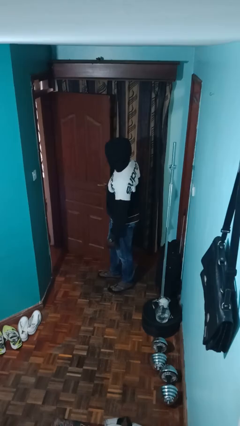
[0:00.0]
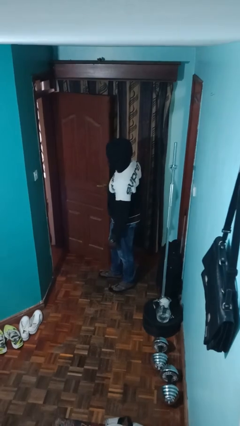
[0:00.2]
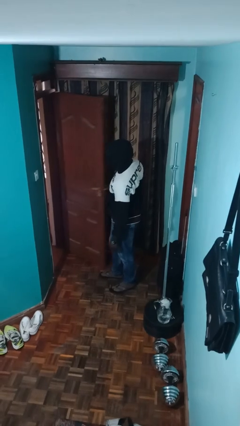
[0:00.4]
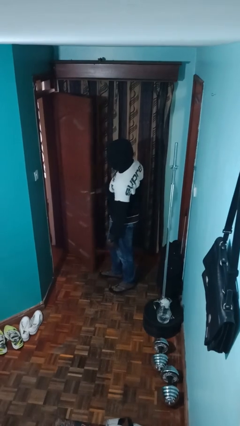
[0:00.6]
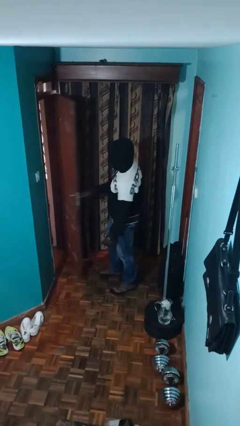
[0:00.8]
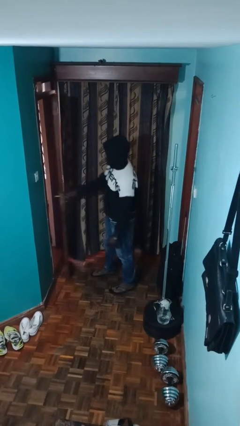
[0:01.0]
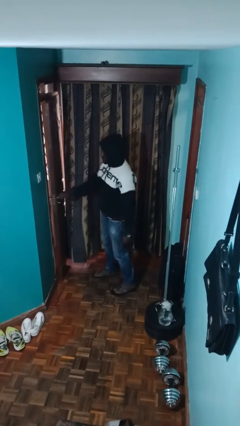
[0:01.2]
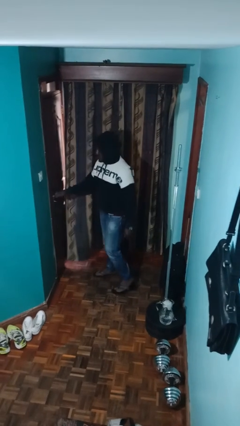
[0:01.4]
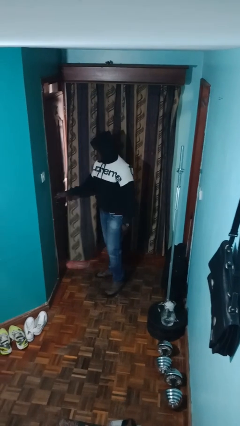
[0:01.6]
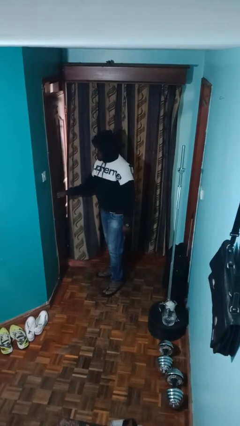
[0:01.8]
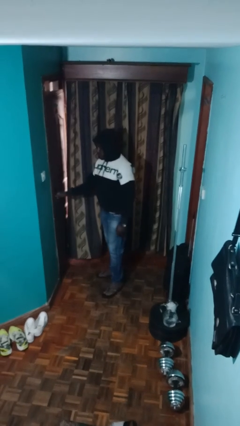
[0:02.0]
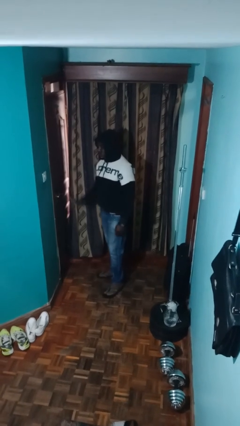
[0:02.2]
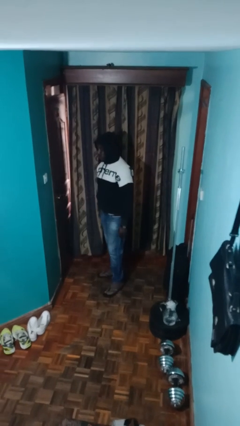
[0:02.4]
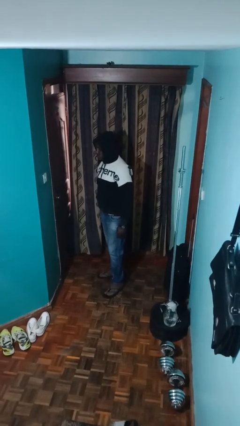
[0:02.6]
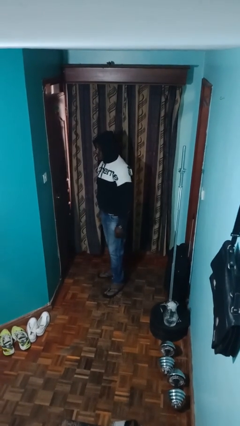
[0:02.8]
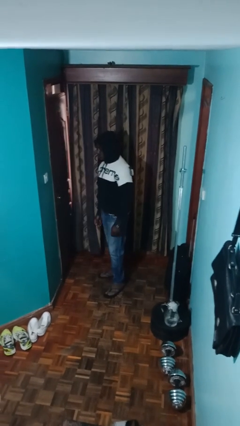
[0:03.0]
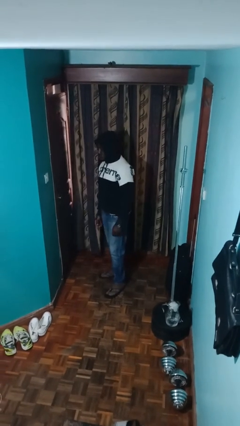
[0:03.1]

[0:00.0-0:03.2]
person closes facility door

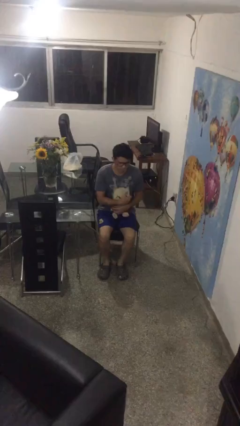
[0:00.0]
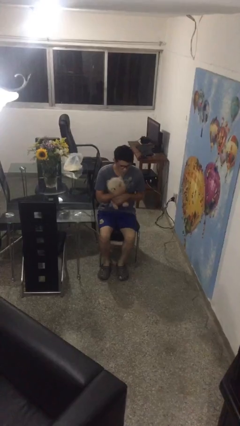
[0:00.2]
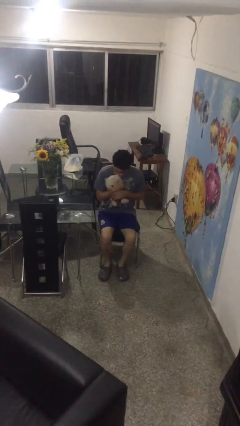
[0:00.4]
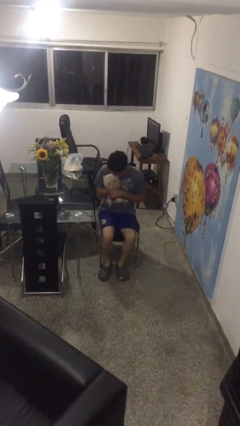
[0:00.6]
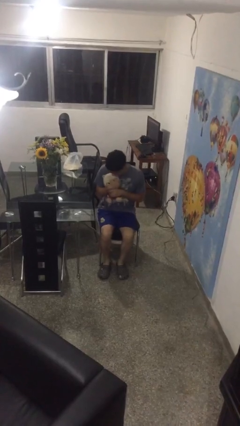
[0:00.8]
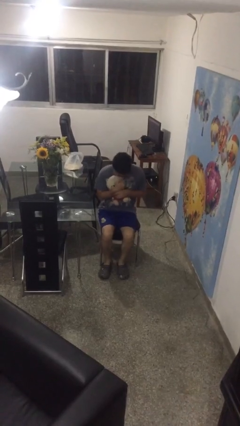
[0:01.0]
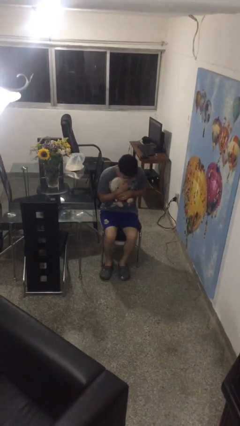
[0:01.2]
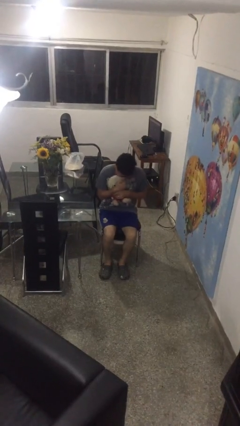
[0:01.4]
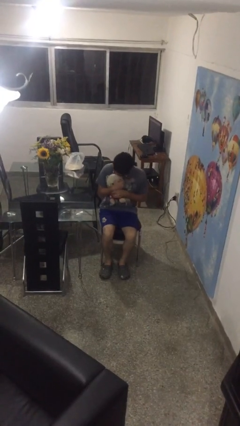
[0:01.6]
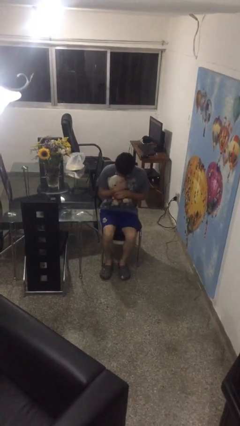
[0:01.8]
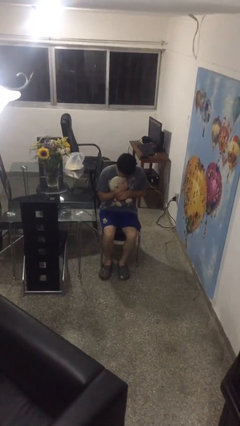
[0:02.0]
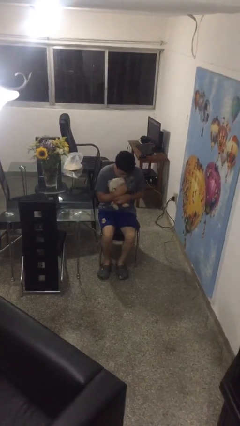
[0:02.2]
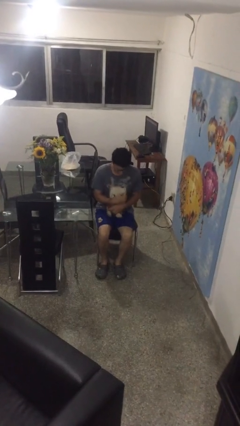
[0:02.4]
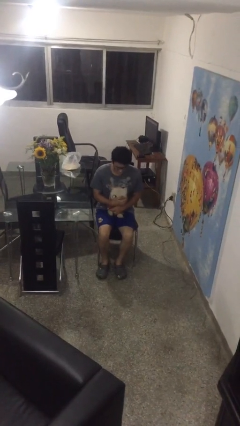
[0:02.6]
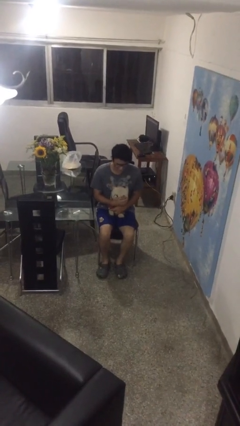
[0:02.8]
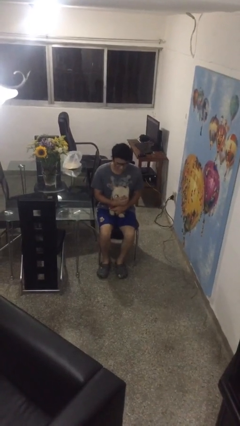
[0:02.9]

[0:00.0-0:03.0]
person hugs stuffed animal

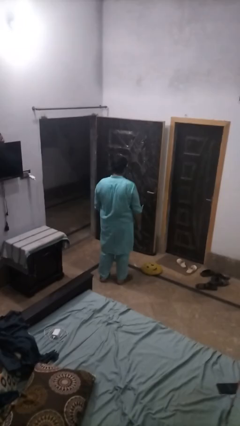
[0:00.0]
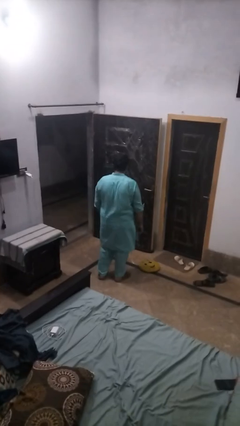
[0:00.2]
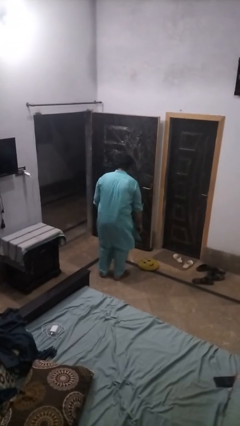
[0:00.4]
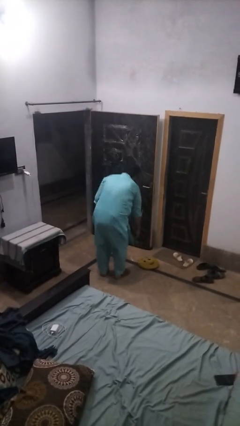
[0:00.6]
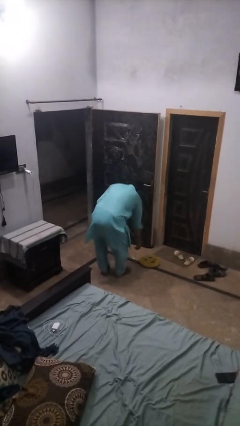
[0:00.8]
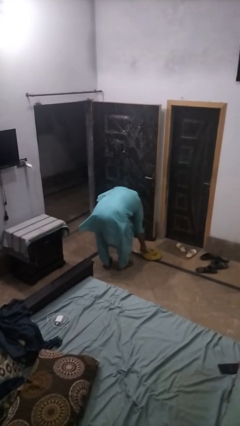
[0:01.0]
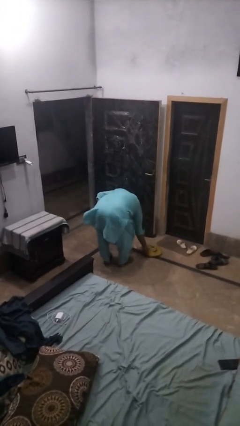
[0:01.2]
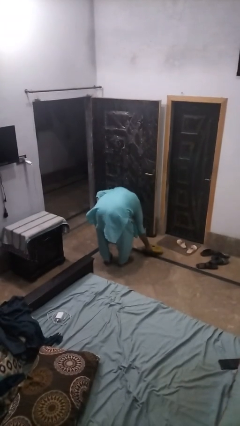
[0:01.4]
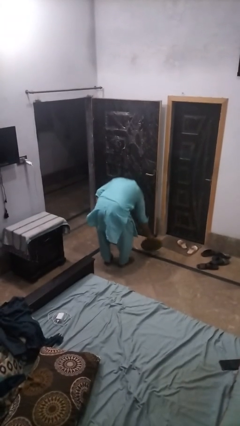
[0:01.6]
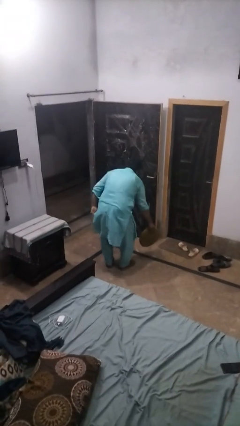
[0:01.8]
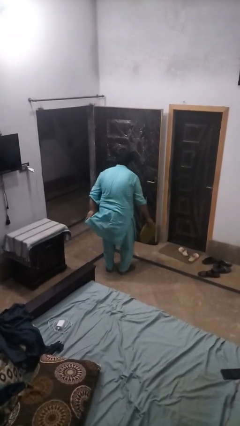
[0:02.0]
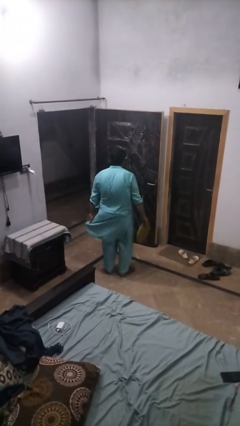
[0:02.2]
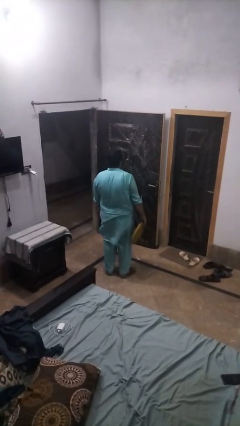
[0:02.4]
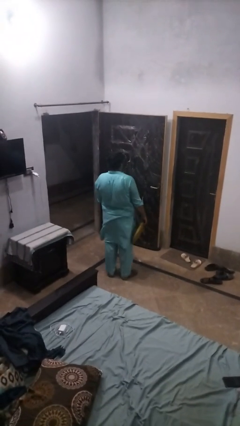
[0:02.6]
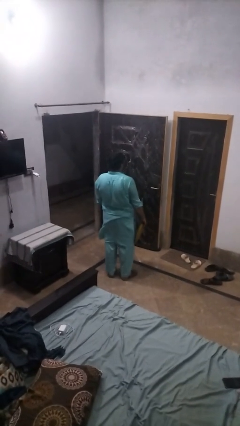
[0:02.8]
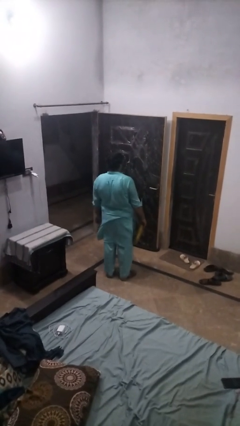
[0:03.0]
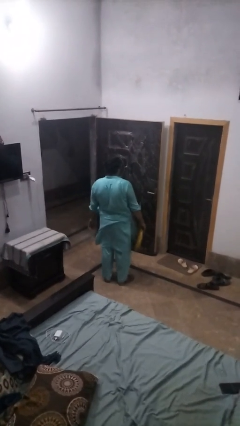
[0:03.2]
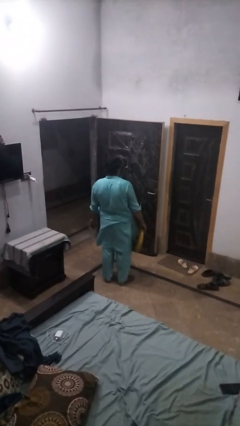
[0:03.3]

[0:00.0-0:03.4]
person picks up object from floor

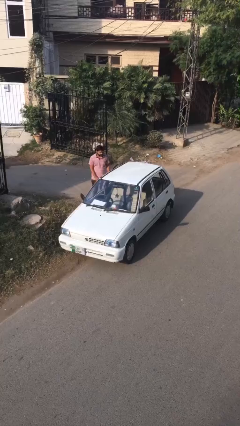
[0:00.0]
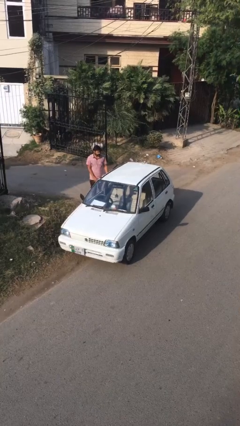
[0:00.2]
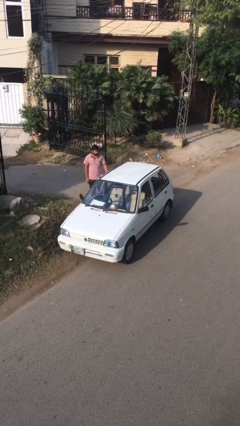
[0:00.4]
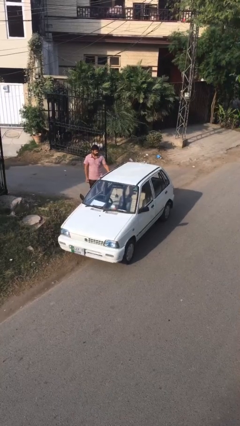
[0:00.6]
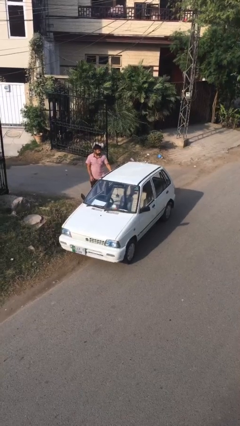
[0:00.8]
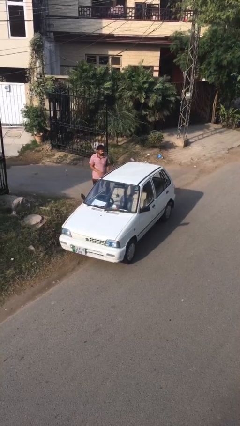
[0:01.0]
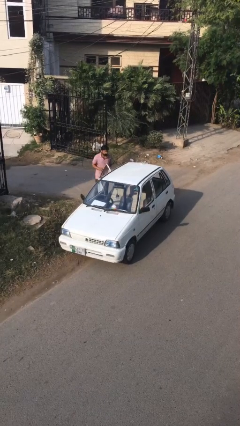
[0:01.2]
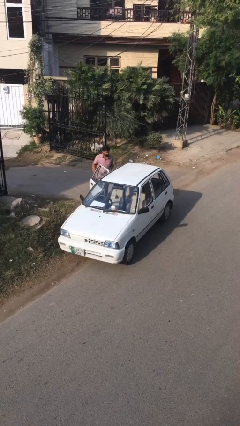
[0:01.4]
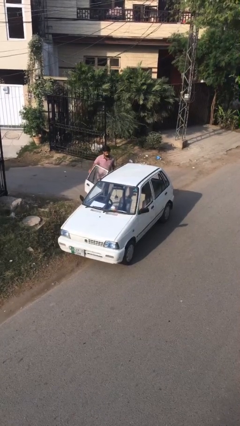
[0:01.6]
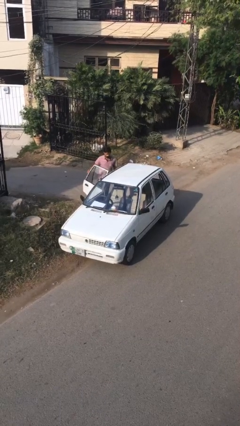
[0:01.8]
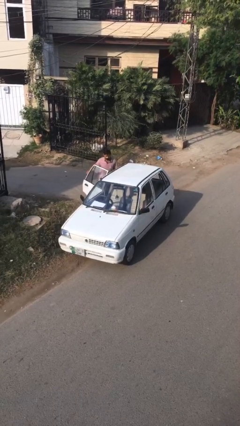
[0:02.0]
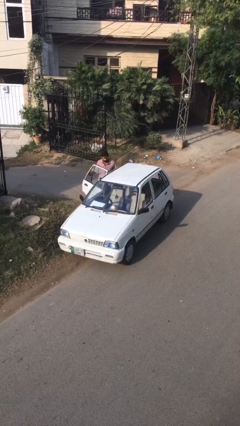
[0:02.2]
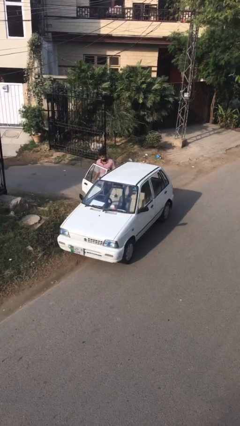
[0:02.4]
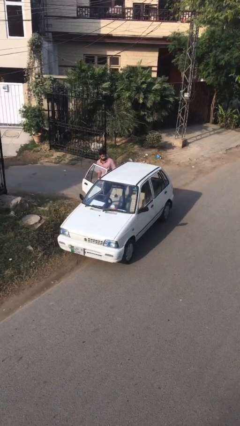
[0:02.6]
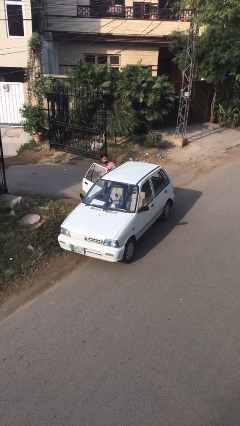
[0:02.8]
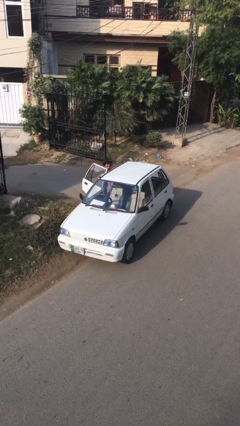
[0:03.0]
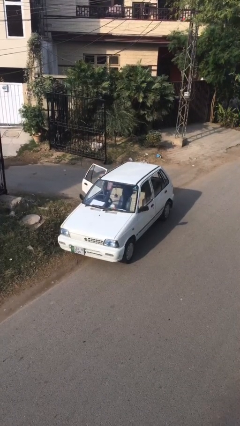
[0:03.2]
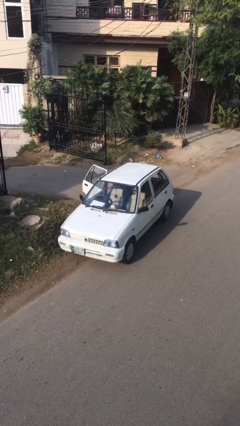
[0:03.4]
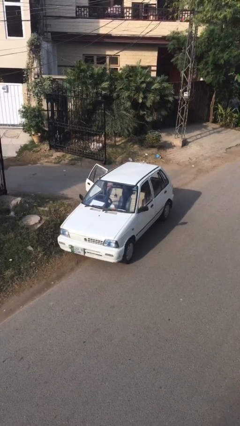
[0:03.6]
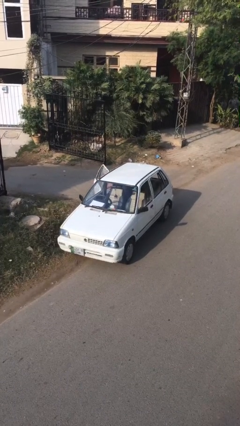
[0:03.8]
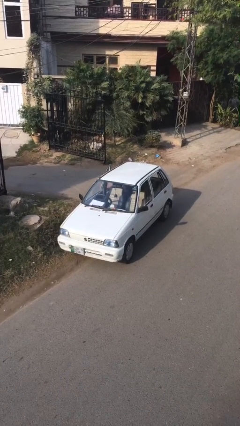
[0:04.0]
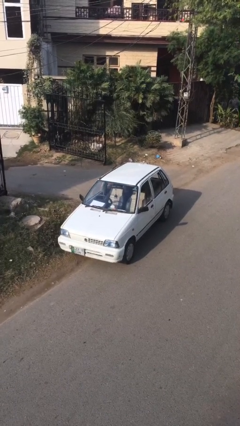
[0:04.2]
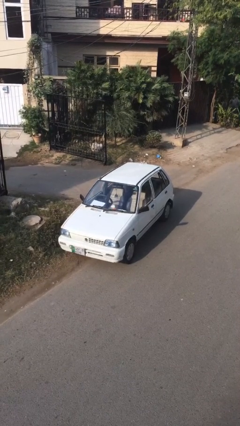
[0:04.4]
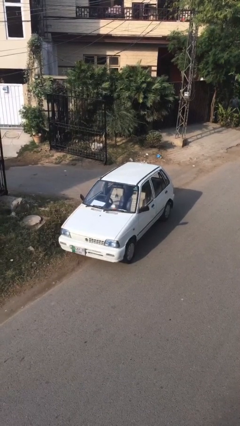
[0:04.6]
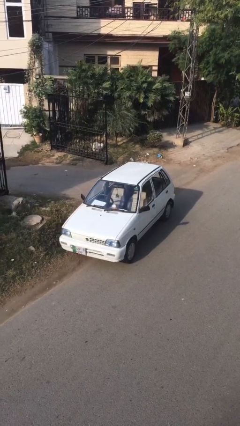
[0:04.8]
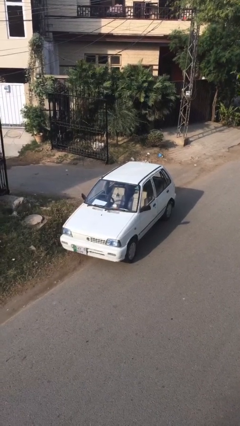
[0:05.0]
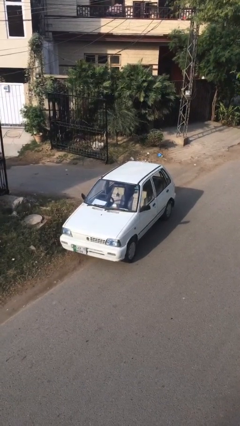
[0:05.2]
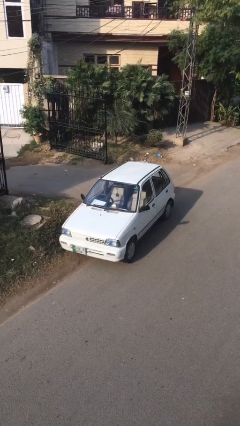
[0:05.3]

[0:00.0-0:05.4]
car picks up person

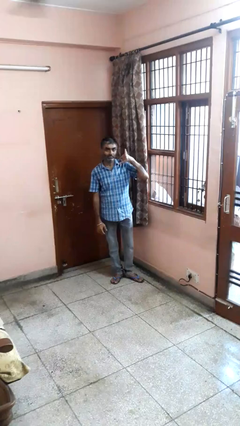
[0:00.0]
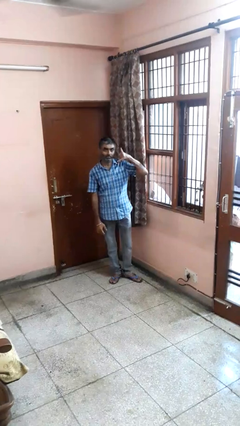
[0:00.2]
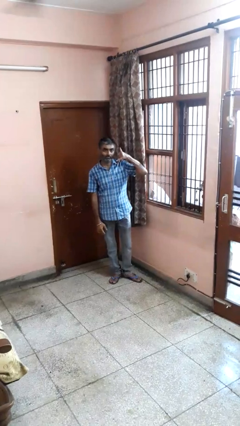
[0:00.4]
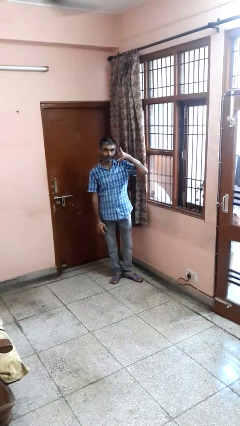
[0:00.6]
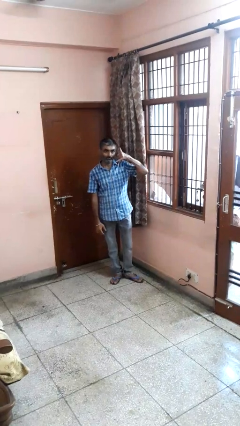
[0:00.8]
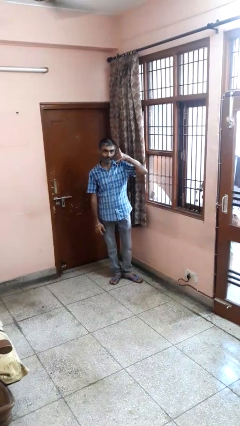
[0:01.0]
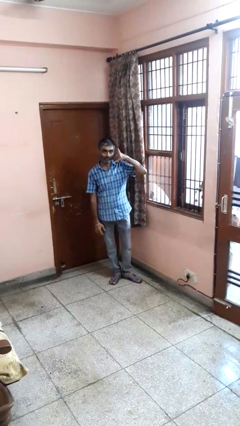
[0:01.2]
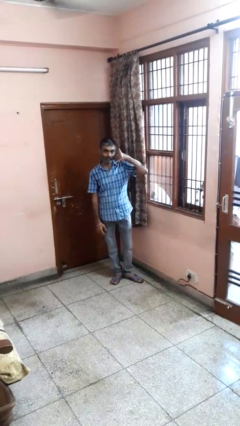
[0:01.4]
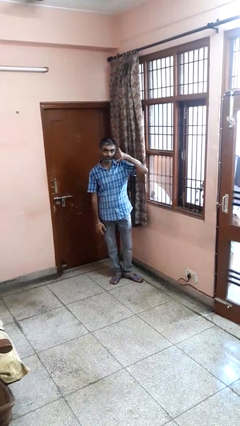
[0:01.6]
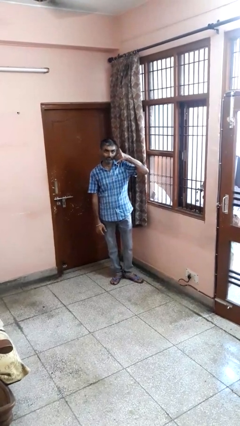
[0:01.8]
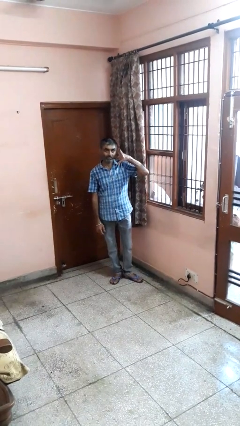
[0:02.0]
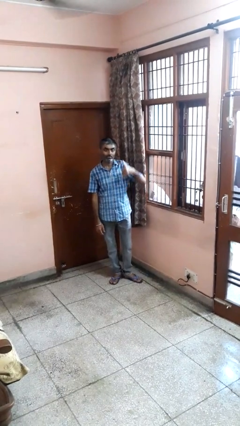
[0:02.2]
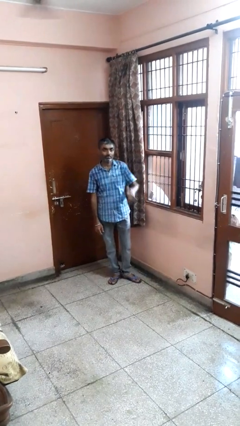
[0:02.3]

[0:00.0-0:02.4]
person gestures call me

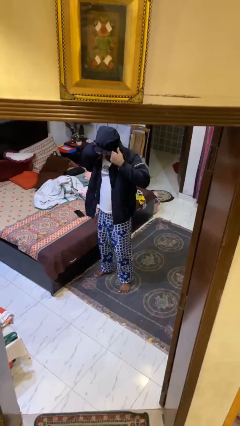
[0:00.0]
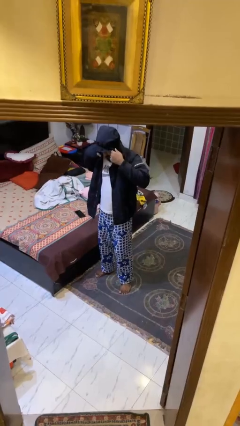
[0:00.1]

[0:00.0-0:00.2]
person takes off hoodie

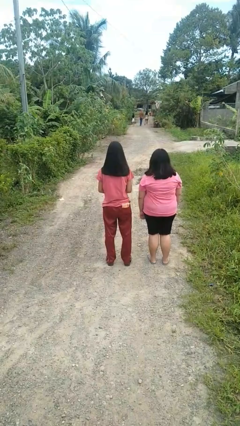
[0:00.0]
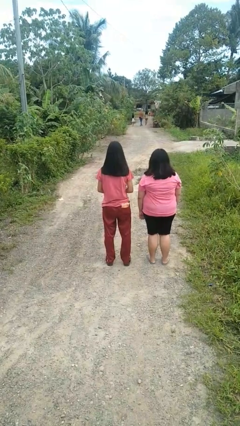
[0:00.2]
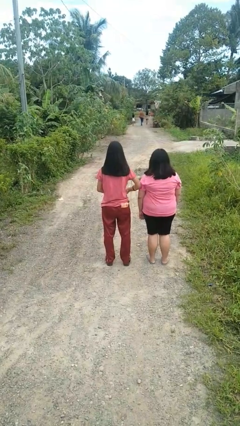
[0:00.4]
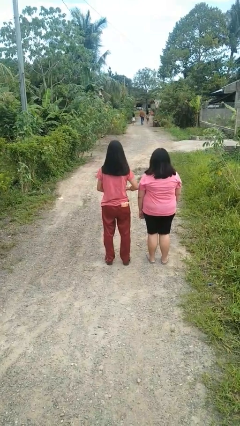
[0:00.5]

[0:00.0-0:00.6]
person nudges person with elbow
